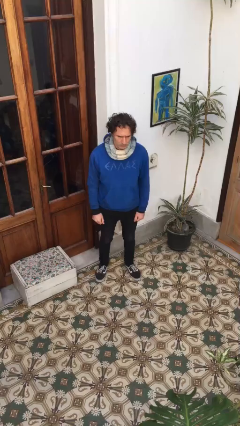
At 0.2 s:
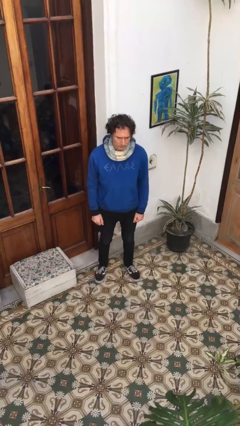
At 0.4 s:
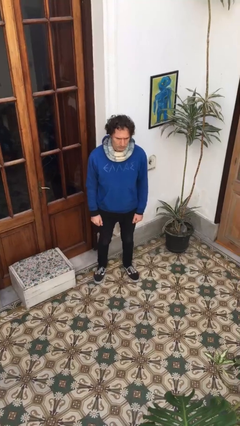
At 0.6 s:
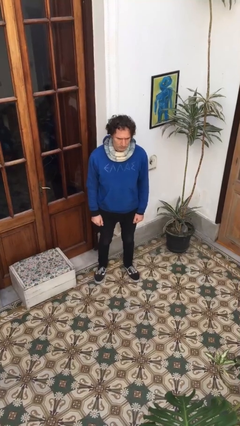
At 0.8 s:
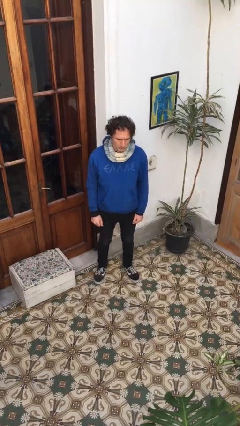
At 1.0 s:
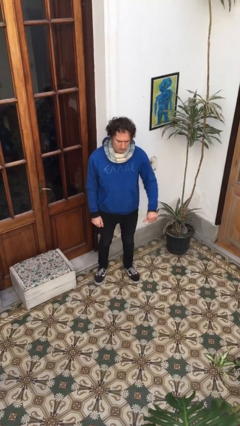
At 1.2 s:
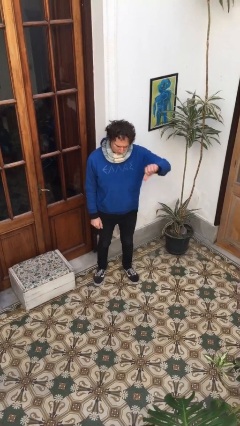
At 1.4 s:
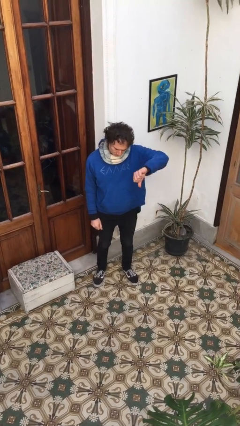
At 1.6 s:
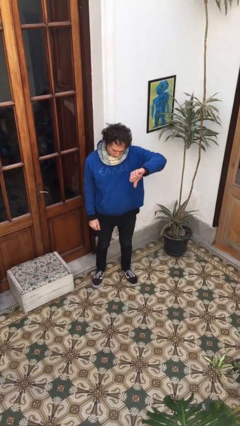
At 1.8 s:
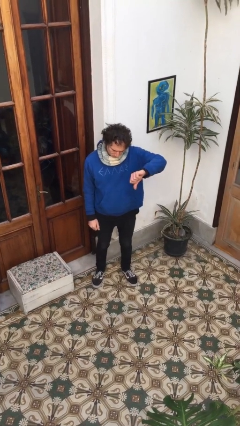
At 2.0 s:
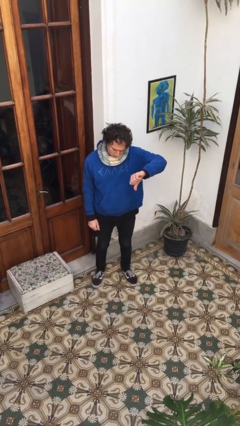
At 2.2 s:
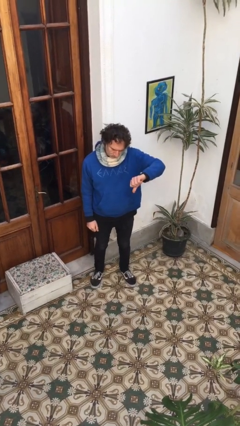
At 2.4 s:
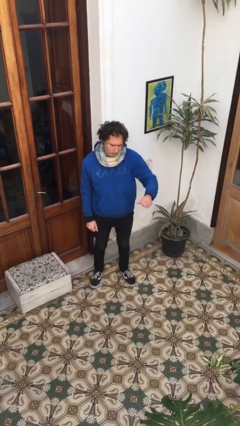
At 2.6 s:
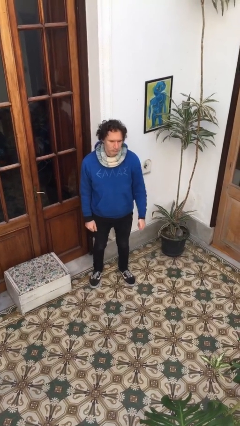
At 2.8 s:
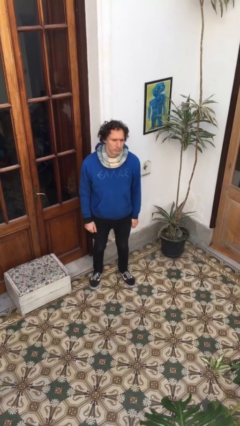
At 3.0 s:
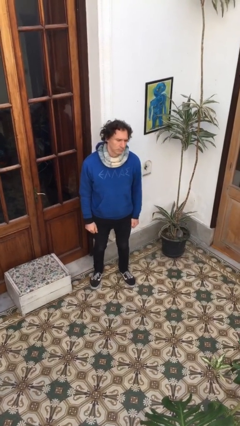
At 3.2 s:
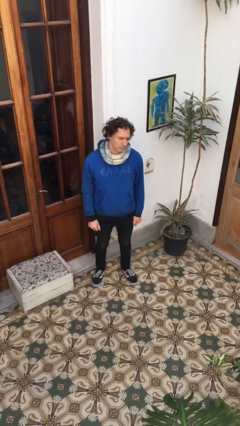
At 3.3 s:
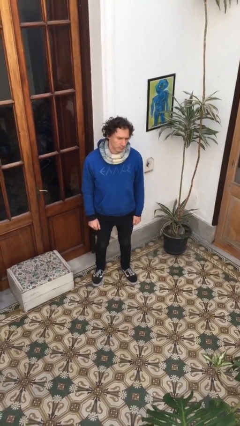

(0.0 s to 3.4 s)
person gestures thumbs down

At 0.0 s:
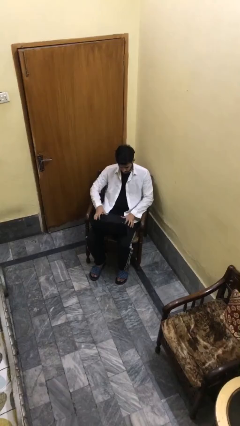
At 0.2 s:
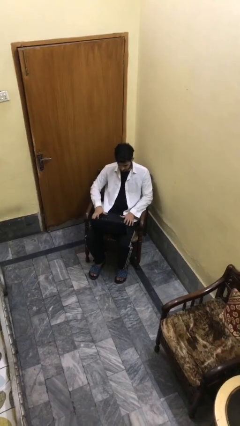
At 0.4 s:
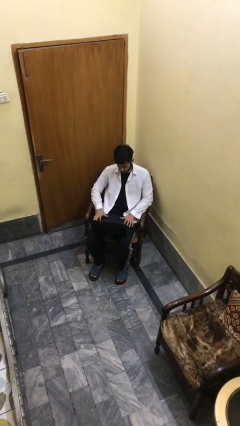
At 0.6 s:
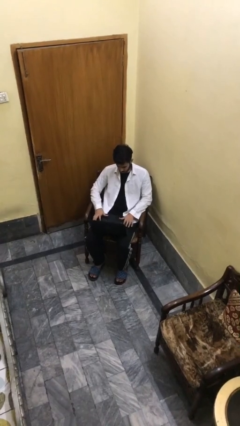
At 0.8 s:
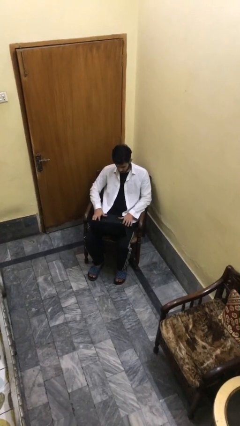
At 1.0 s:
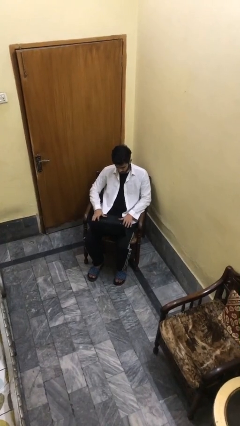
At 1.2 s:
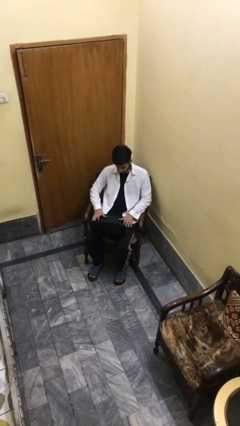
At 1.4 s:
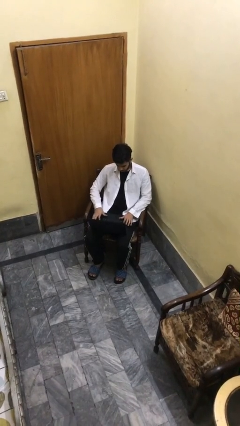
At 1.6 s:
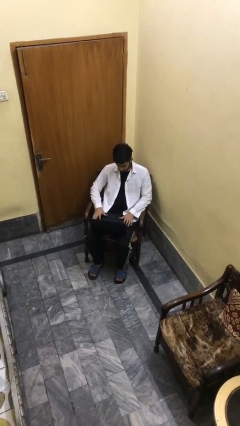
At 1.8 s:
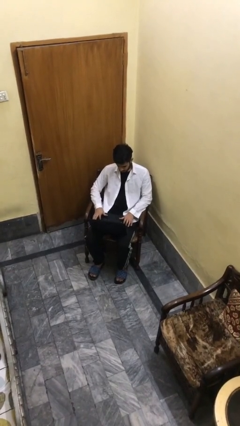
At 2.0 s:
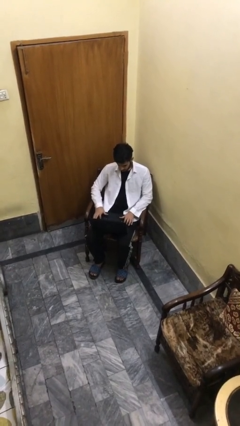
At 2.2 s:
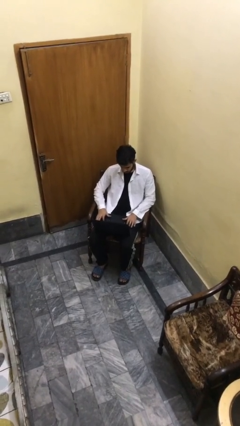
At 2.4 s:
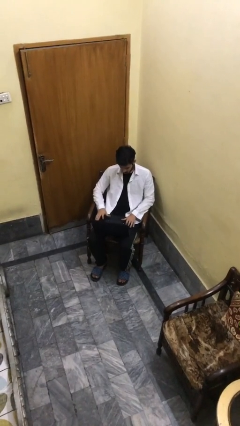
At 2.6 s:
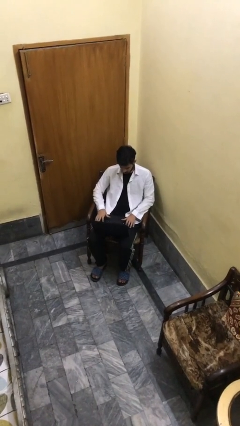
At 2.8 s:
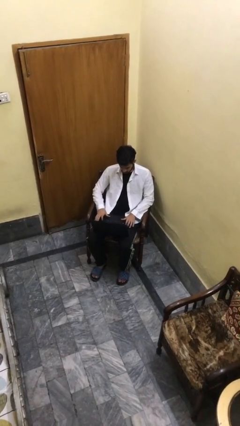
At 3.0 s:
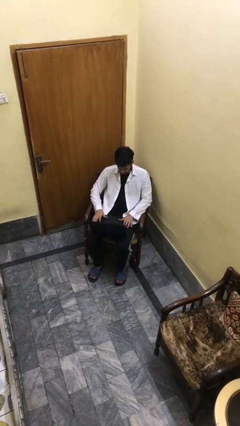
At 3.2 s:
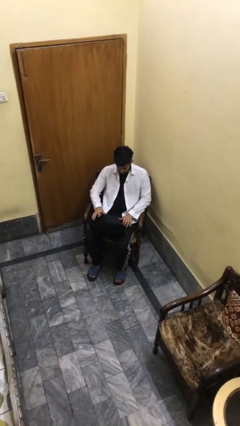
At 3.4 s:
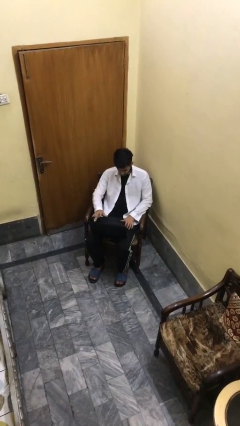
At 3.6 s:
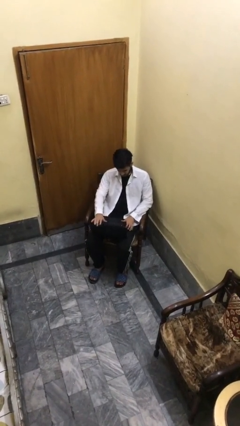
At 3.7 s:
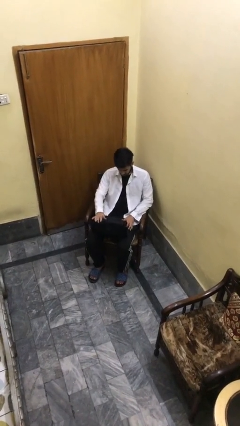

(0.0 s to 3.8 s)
person interacts with laptop

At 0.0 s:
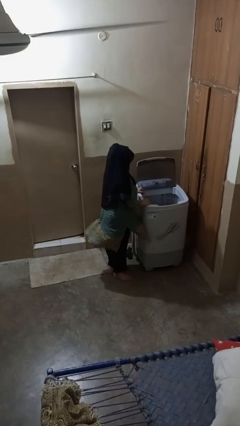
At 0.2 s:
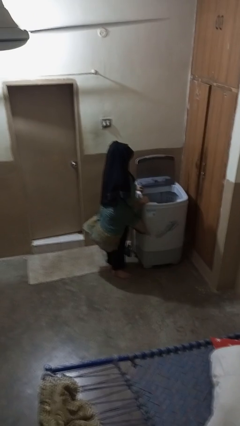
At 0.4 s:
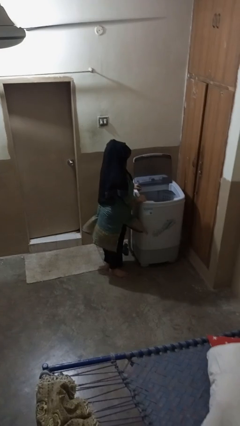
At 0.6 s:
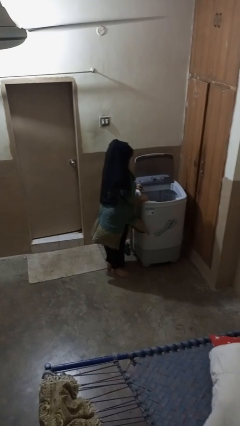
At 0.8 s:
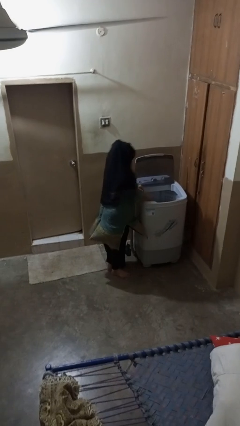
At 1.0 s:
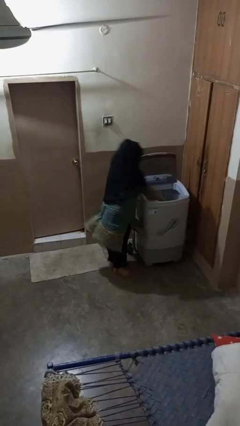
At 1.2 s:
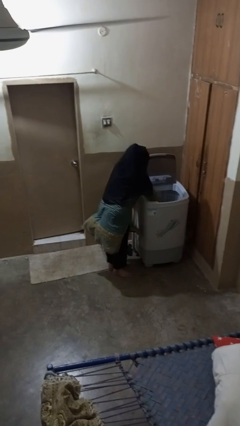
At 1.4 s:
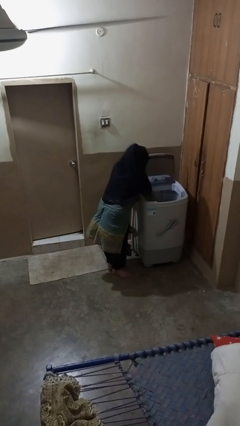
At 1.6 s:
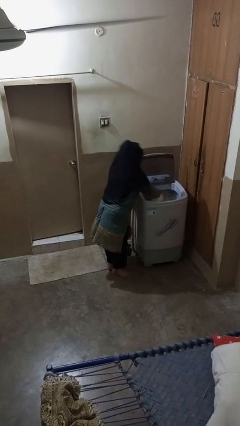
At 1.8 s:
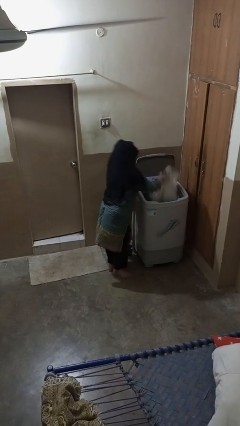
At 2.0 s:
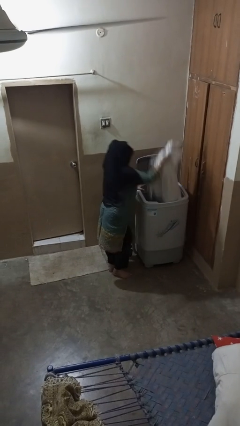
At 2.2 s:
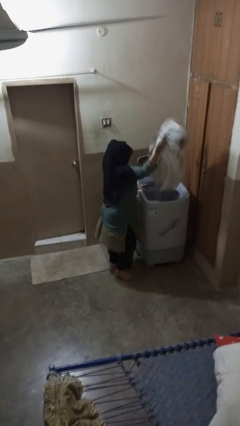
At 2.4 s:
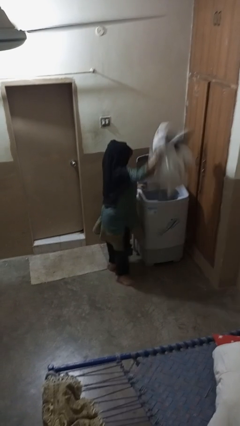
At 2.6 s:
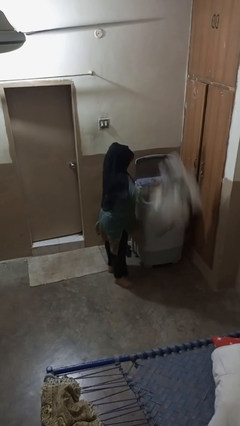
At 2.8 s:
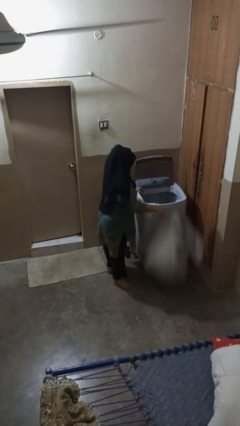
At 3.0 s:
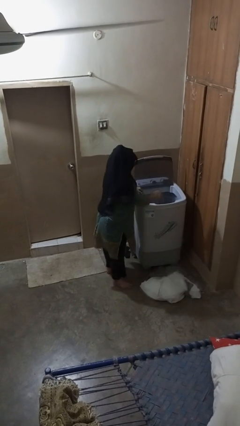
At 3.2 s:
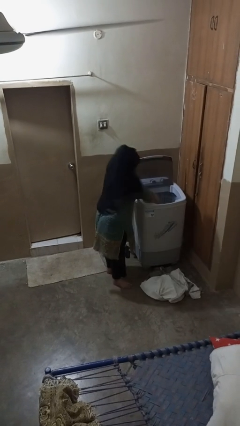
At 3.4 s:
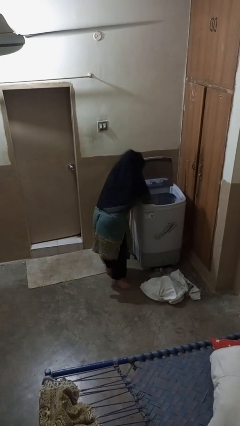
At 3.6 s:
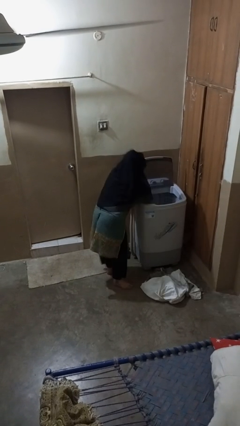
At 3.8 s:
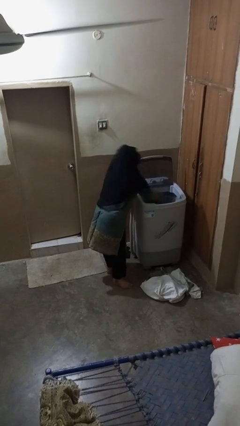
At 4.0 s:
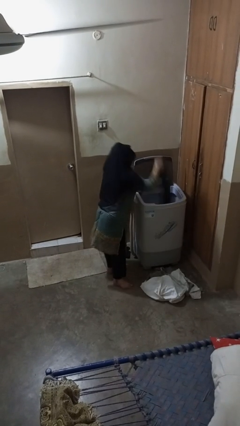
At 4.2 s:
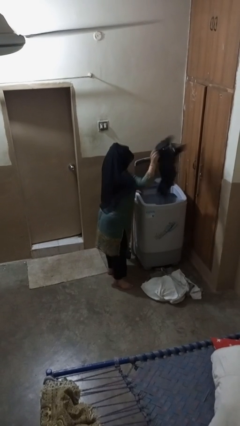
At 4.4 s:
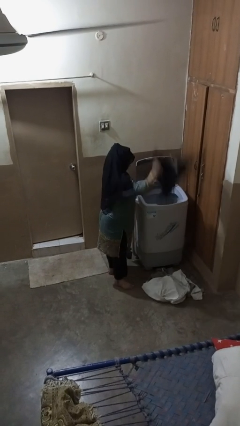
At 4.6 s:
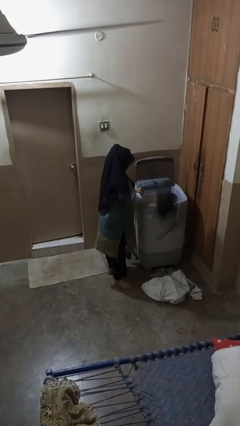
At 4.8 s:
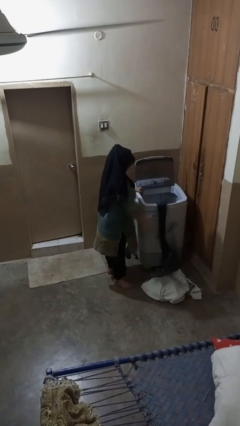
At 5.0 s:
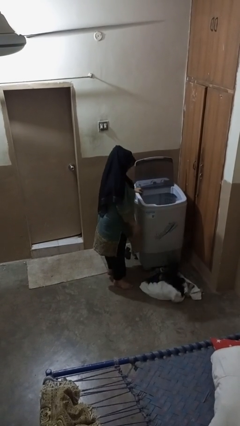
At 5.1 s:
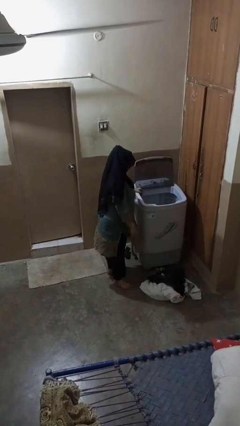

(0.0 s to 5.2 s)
person unloads clotheswasher

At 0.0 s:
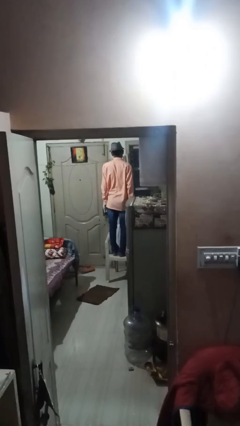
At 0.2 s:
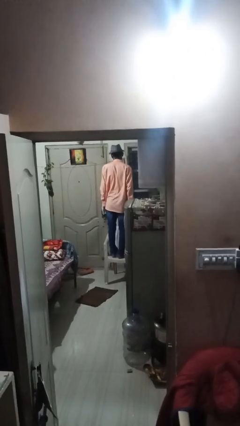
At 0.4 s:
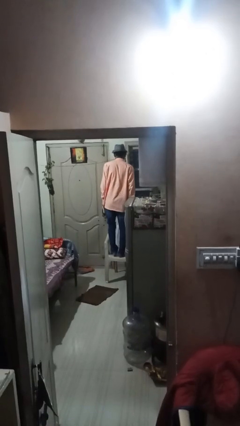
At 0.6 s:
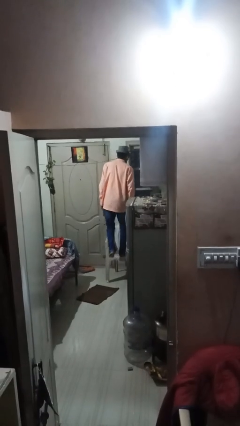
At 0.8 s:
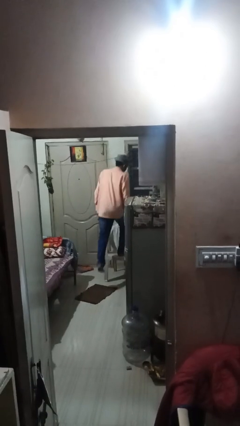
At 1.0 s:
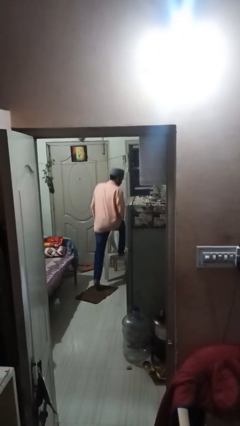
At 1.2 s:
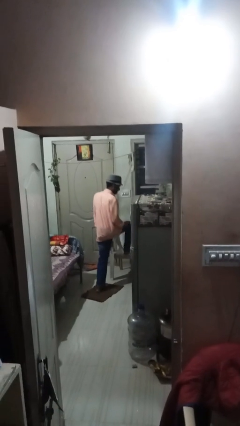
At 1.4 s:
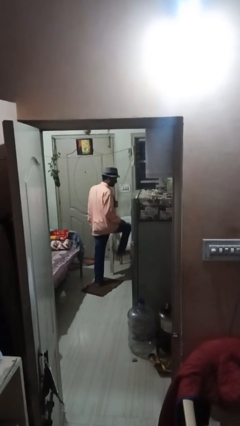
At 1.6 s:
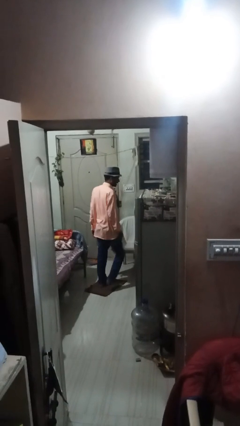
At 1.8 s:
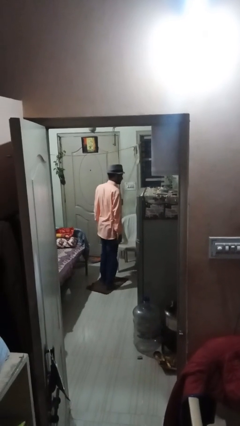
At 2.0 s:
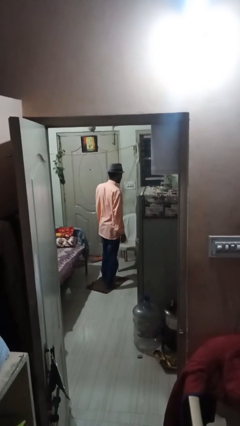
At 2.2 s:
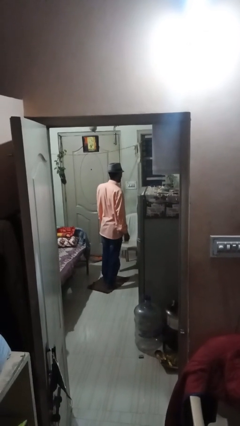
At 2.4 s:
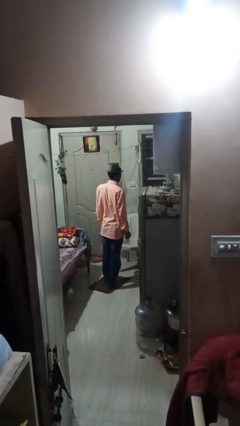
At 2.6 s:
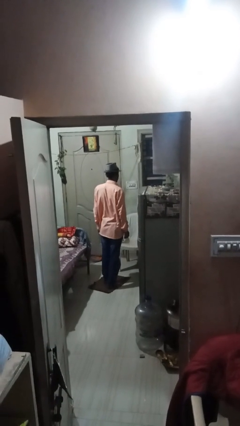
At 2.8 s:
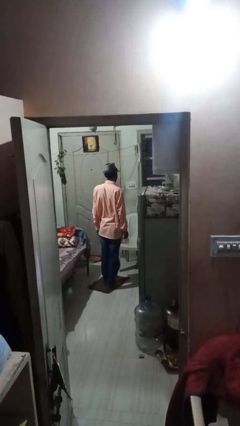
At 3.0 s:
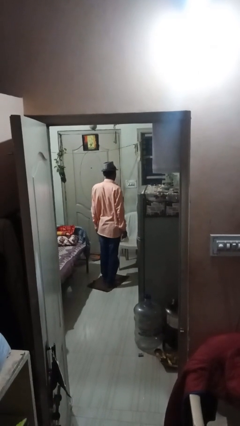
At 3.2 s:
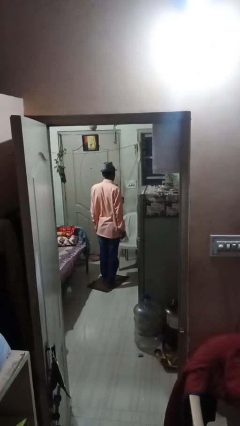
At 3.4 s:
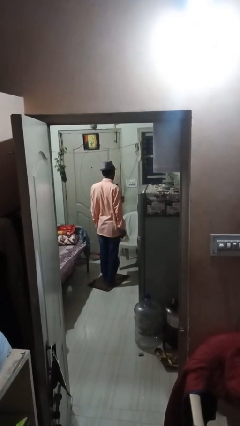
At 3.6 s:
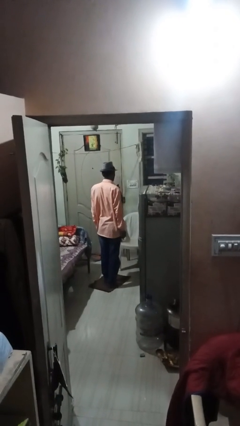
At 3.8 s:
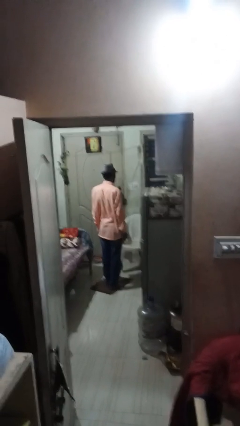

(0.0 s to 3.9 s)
person climbs off chair

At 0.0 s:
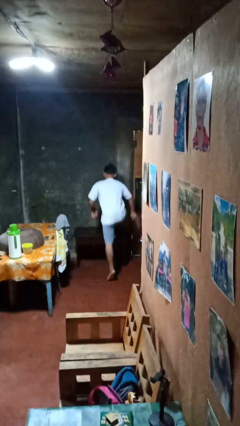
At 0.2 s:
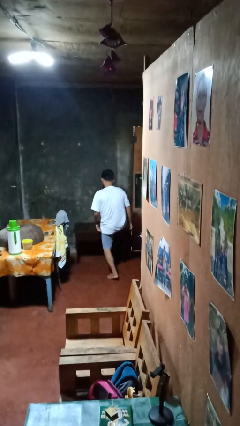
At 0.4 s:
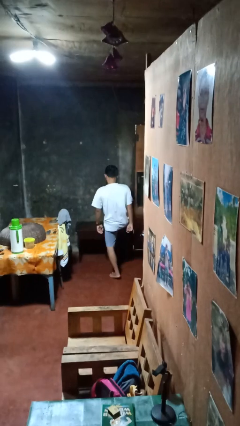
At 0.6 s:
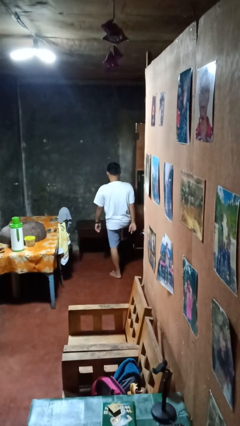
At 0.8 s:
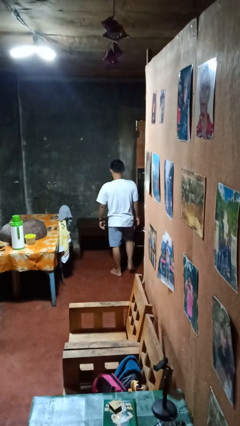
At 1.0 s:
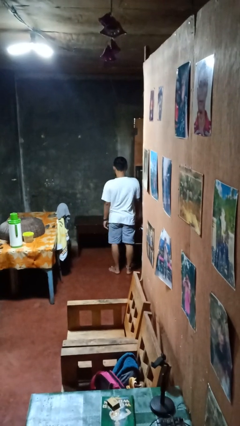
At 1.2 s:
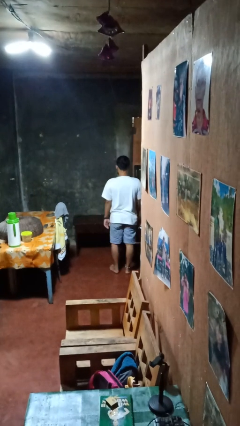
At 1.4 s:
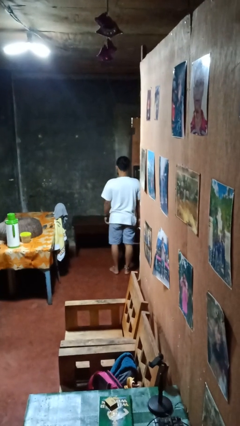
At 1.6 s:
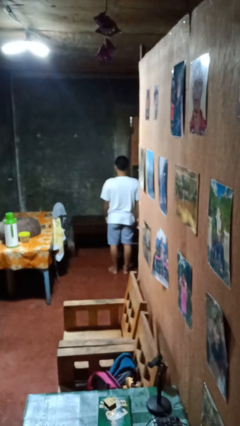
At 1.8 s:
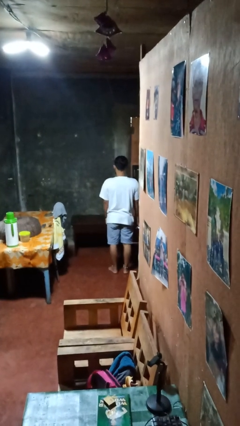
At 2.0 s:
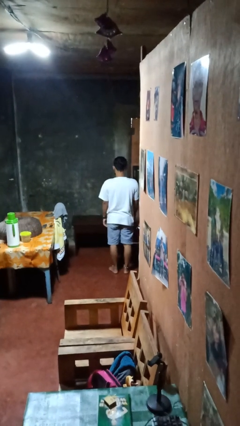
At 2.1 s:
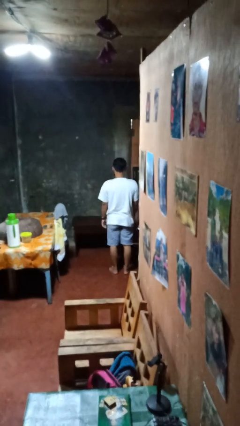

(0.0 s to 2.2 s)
person climbs off table
